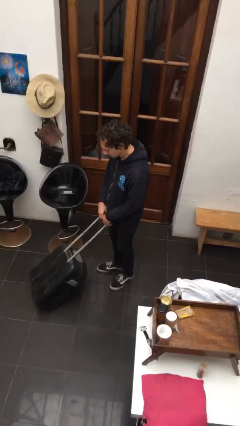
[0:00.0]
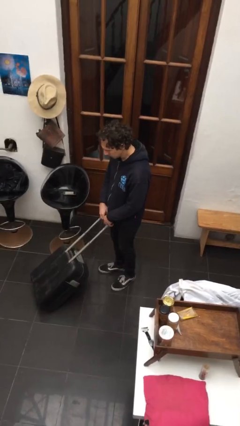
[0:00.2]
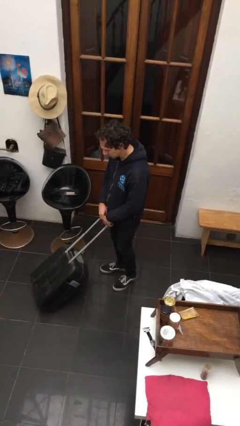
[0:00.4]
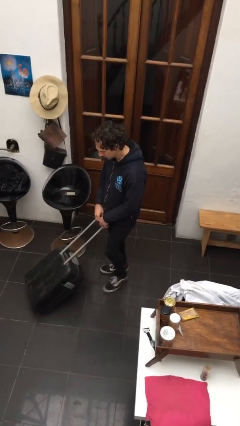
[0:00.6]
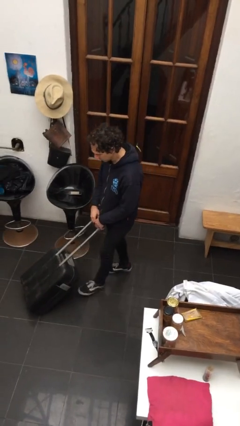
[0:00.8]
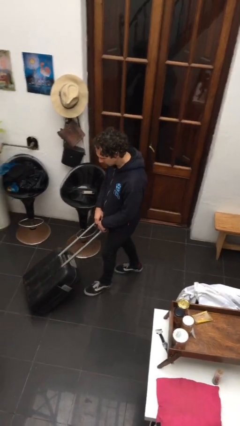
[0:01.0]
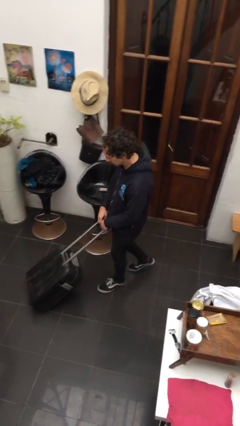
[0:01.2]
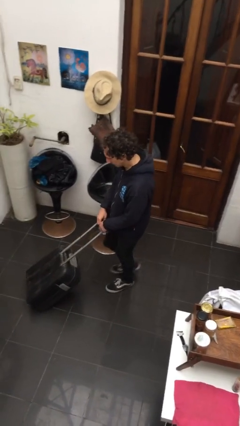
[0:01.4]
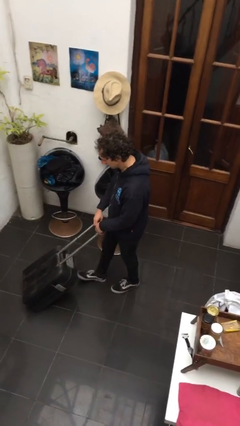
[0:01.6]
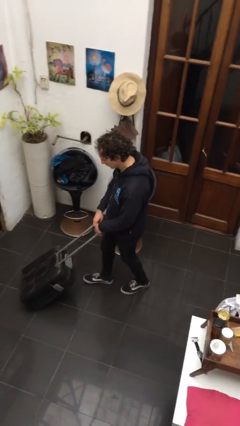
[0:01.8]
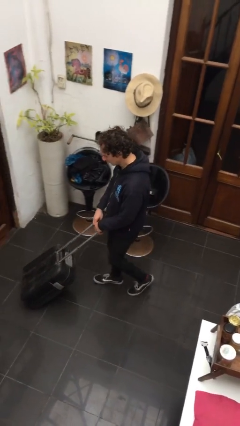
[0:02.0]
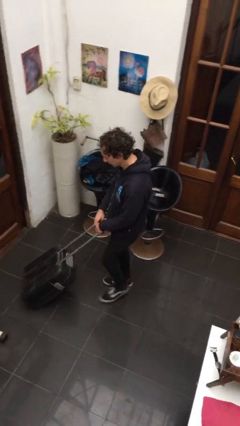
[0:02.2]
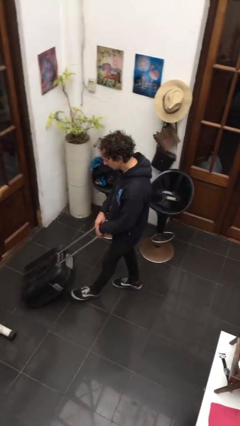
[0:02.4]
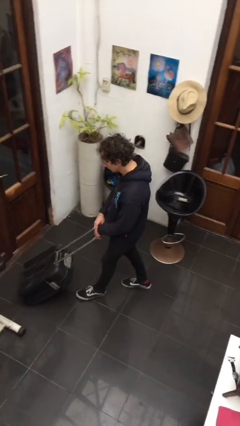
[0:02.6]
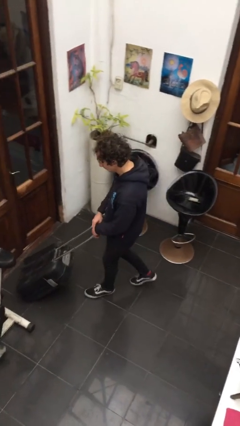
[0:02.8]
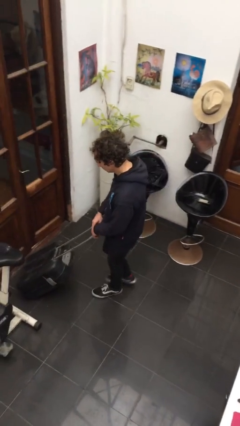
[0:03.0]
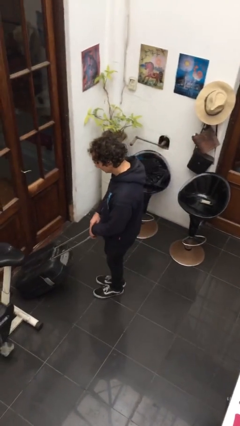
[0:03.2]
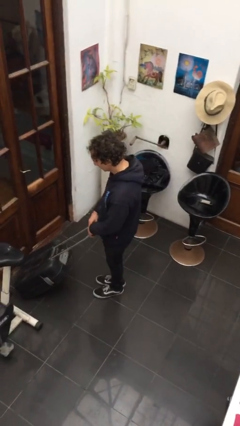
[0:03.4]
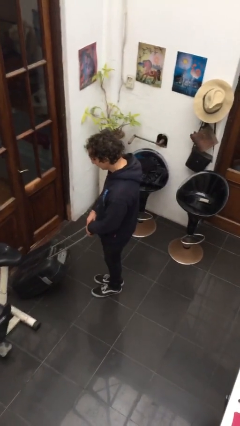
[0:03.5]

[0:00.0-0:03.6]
person pushes wheeled cart

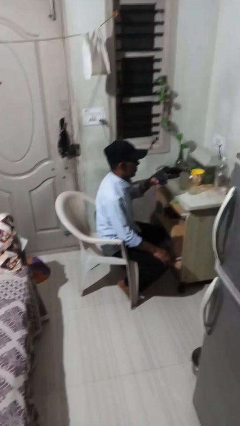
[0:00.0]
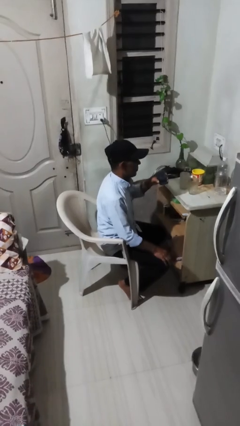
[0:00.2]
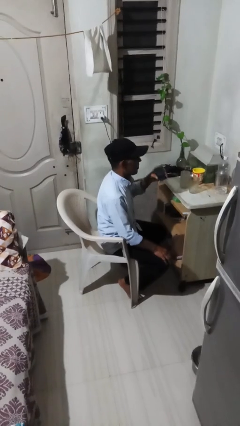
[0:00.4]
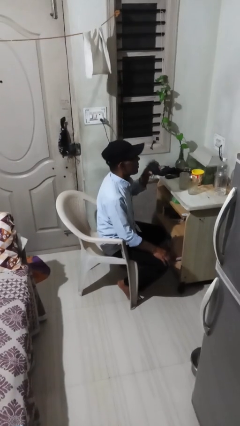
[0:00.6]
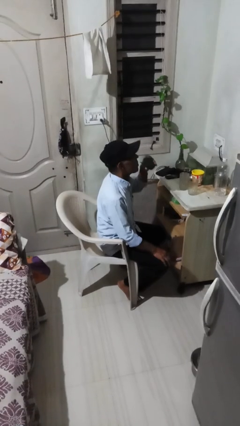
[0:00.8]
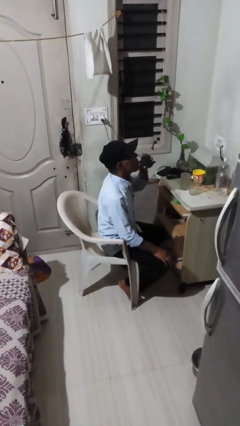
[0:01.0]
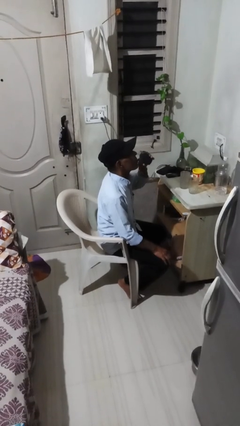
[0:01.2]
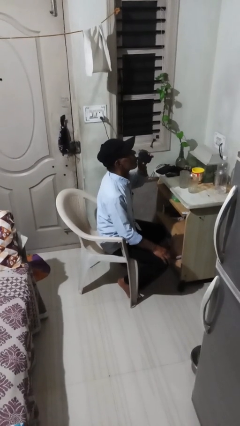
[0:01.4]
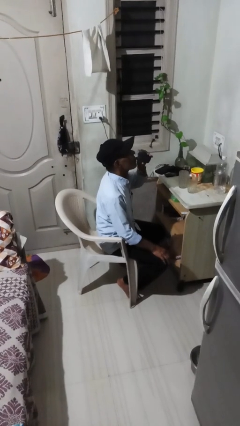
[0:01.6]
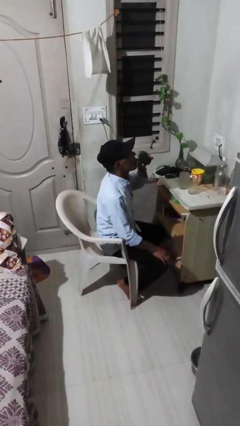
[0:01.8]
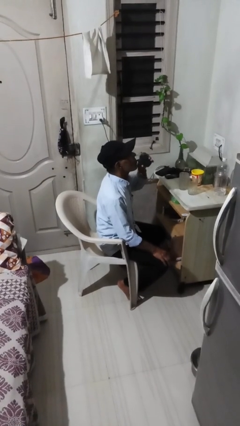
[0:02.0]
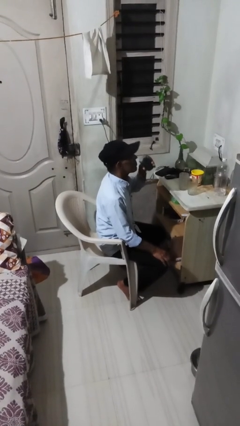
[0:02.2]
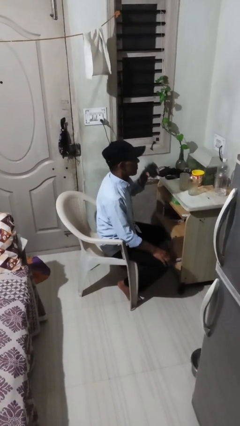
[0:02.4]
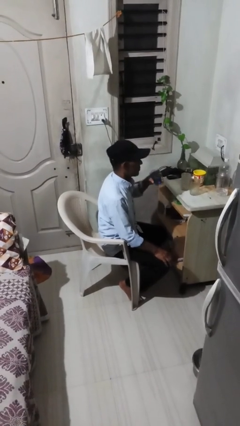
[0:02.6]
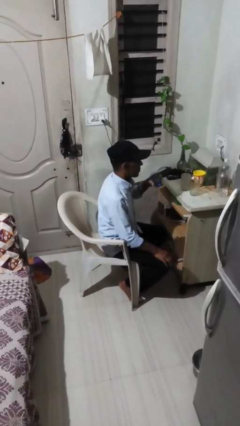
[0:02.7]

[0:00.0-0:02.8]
person drinks from shotglass

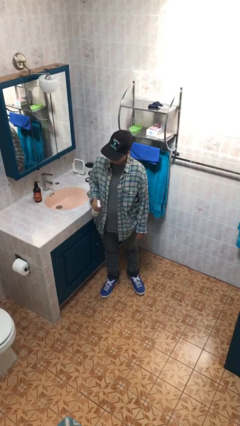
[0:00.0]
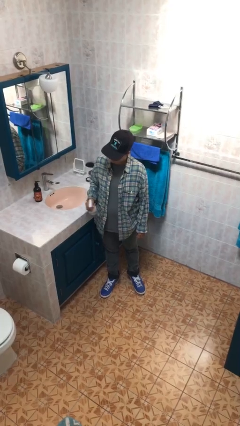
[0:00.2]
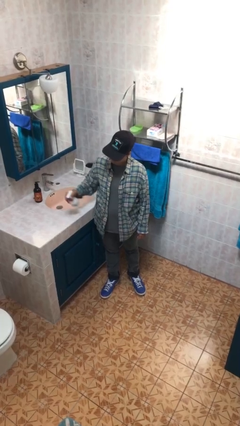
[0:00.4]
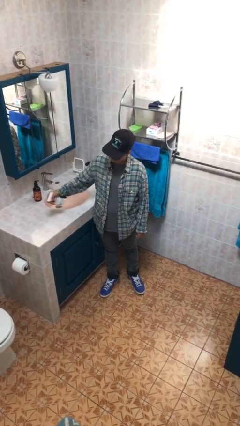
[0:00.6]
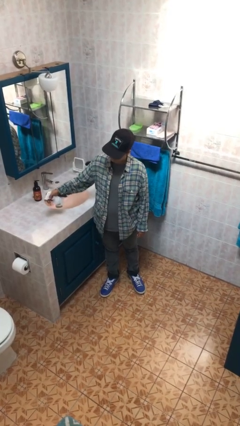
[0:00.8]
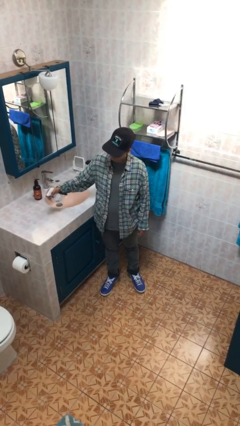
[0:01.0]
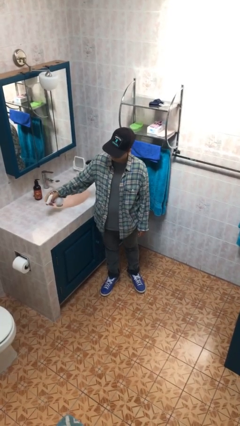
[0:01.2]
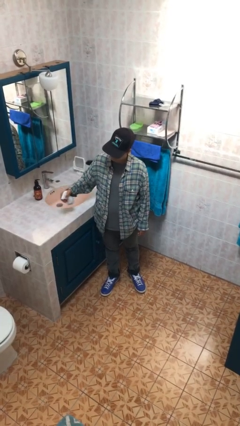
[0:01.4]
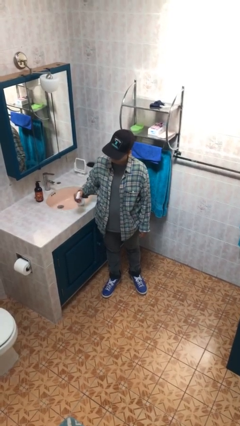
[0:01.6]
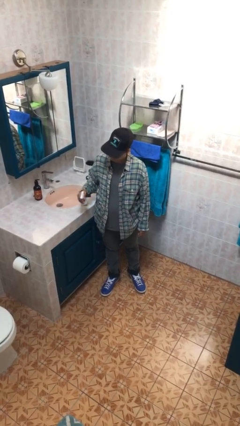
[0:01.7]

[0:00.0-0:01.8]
person sprays from bottle

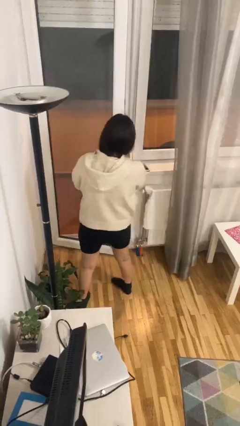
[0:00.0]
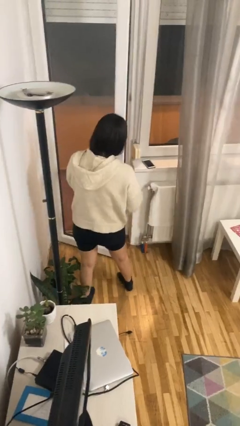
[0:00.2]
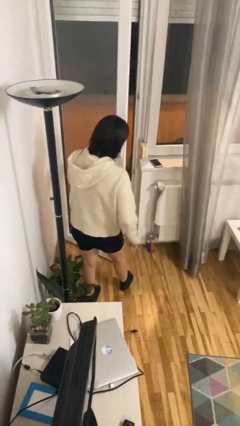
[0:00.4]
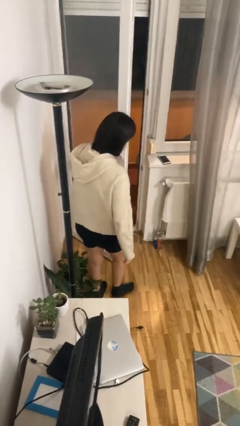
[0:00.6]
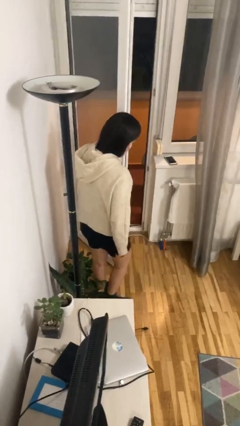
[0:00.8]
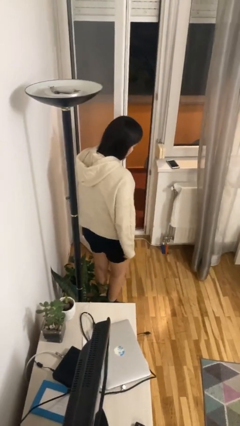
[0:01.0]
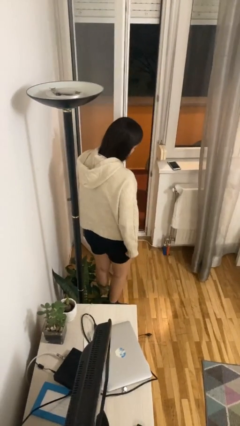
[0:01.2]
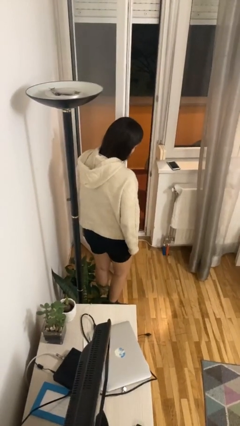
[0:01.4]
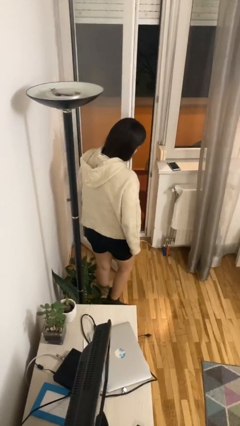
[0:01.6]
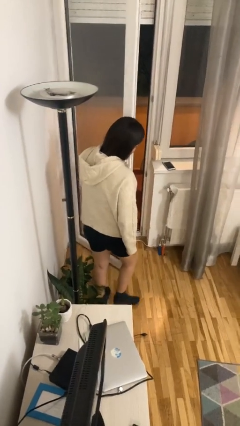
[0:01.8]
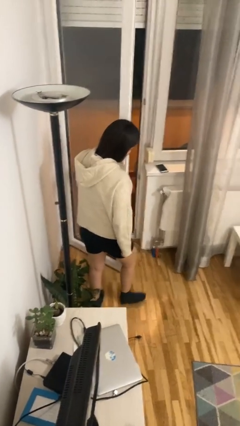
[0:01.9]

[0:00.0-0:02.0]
person opens facility door

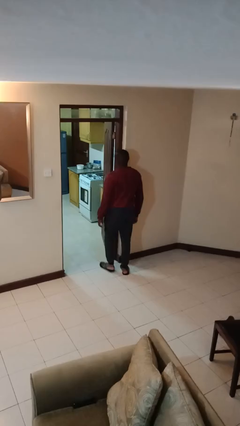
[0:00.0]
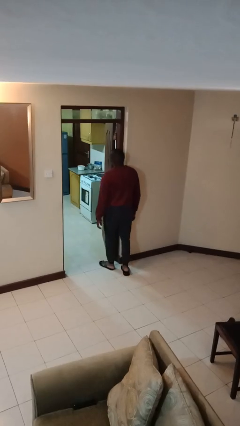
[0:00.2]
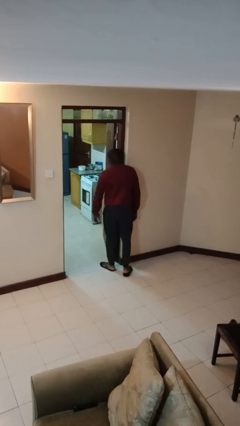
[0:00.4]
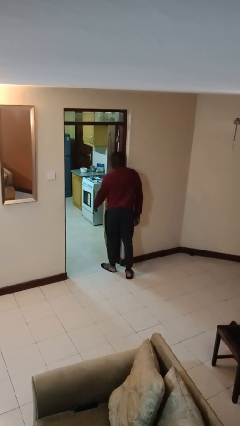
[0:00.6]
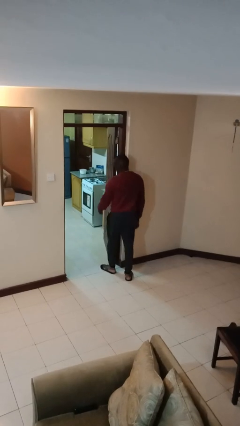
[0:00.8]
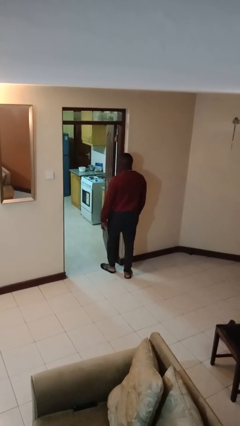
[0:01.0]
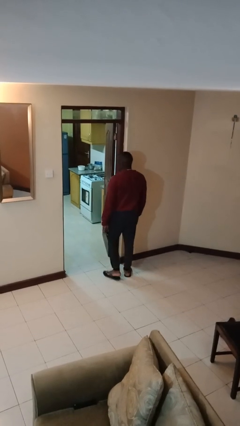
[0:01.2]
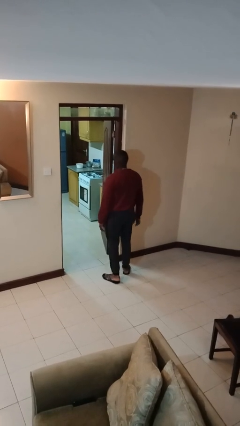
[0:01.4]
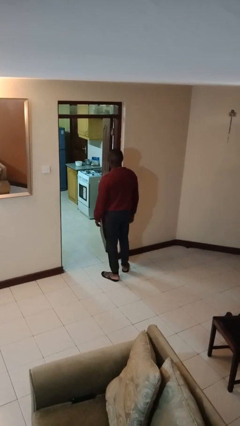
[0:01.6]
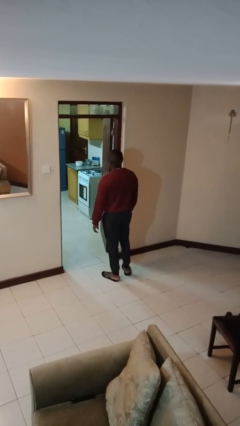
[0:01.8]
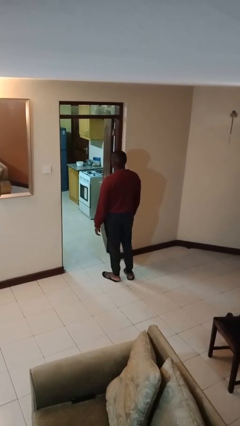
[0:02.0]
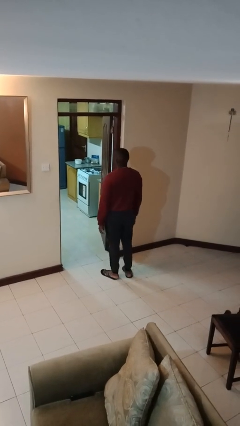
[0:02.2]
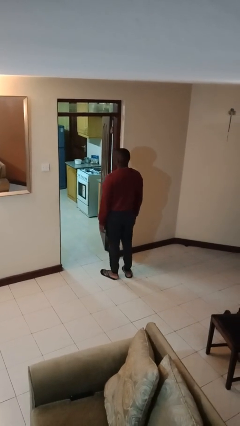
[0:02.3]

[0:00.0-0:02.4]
person bumps into wall

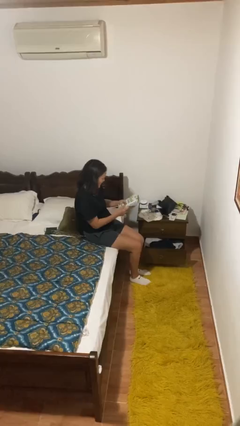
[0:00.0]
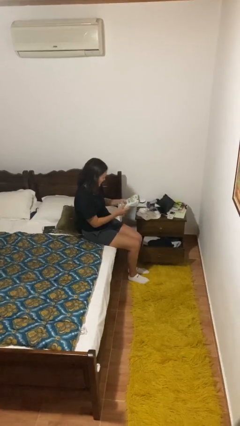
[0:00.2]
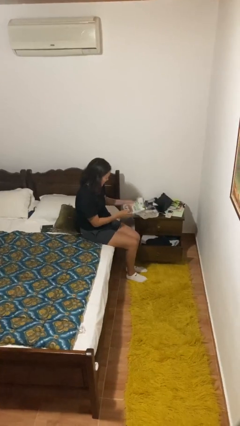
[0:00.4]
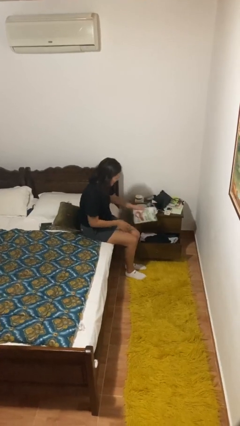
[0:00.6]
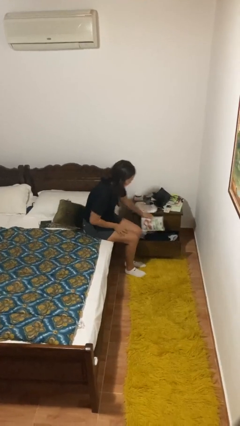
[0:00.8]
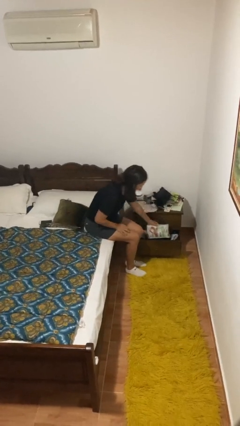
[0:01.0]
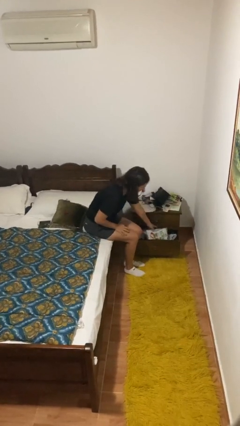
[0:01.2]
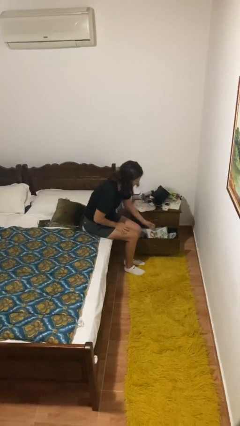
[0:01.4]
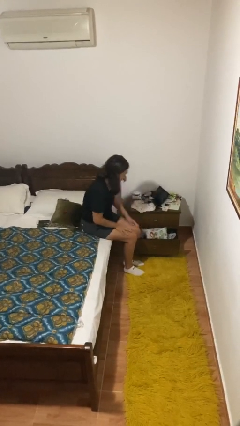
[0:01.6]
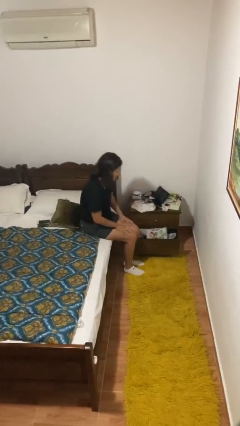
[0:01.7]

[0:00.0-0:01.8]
person puts down object into cabinet

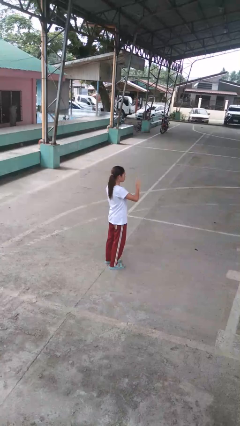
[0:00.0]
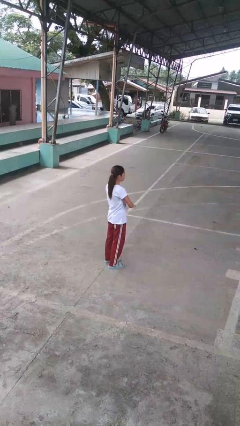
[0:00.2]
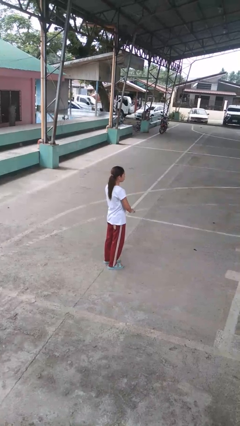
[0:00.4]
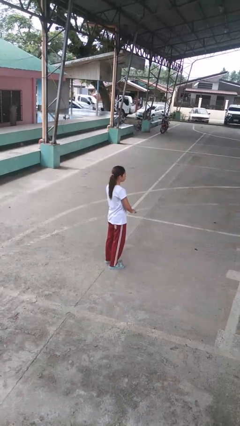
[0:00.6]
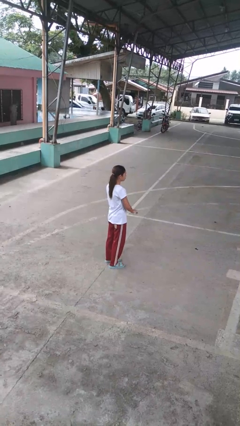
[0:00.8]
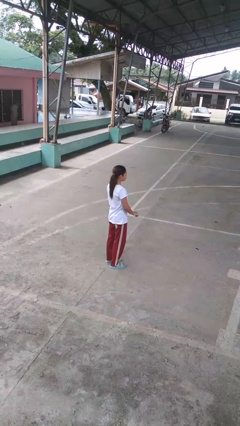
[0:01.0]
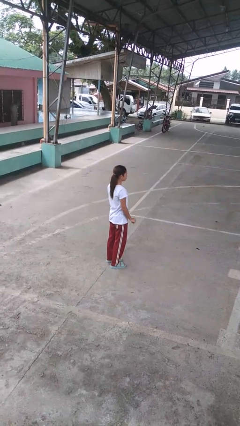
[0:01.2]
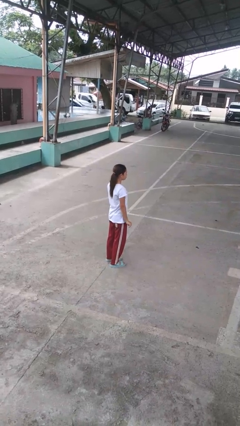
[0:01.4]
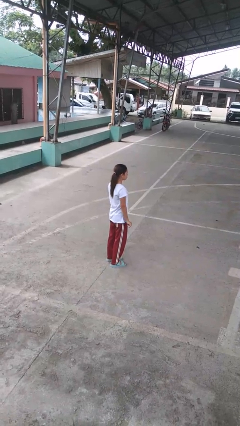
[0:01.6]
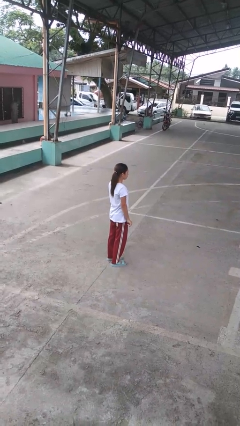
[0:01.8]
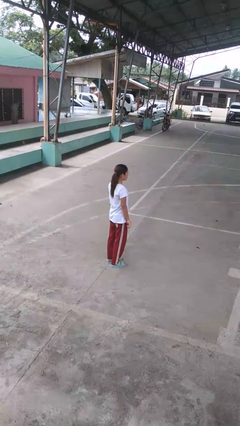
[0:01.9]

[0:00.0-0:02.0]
person gestures swipe down

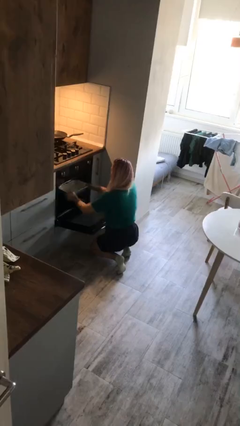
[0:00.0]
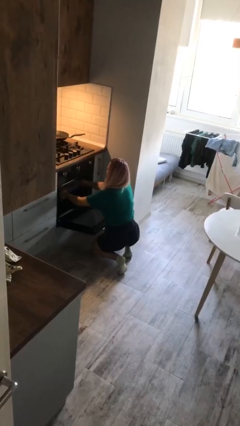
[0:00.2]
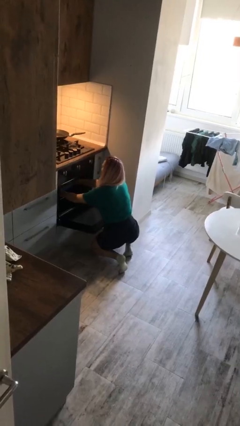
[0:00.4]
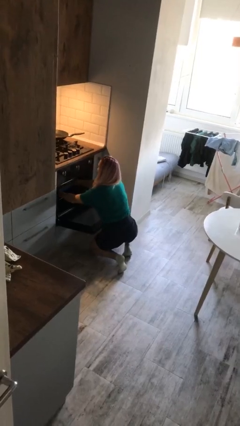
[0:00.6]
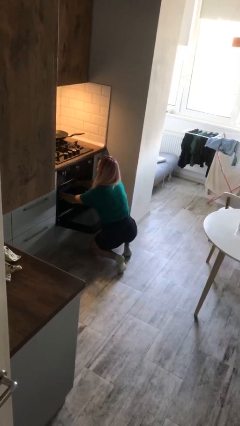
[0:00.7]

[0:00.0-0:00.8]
person puts object into oven
